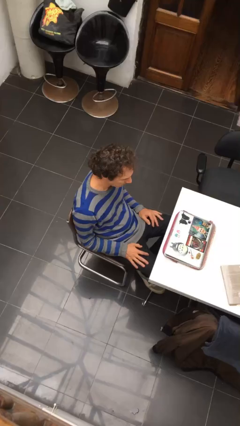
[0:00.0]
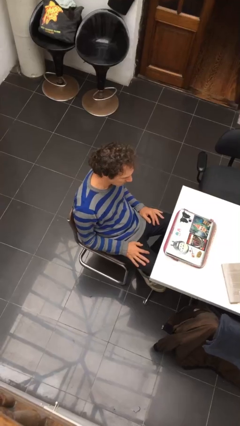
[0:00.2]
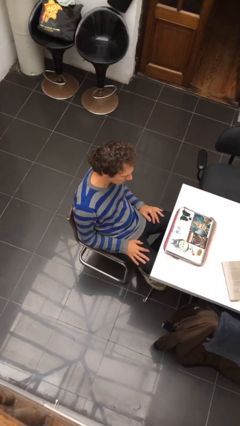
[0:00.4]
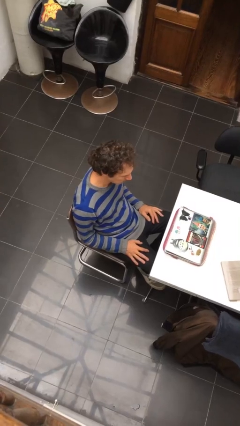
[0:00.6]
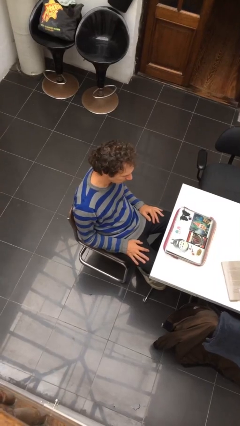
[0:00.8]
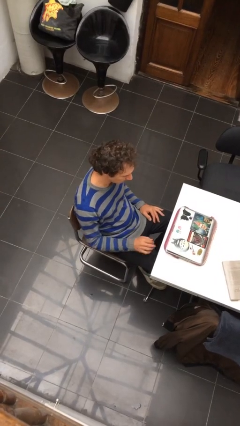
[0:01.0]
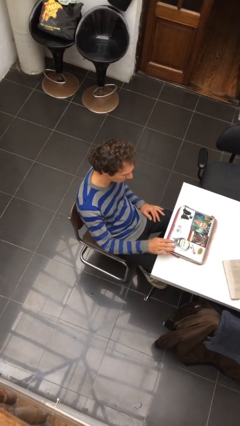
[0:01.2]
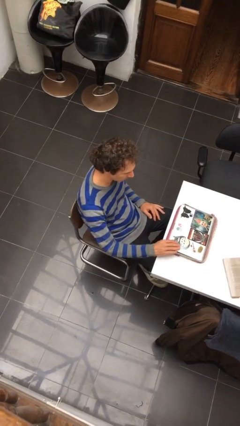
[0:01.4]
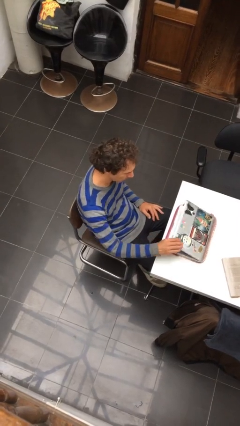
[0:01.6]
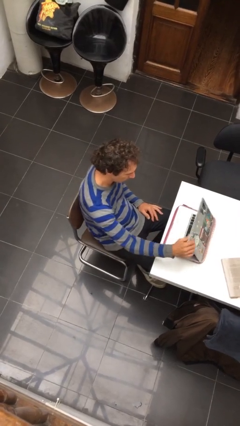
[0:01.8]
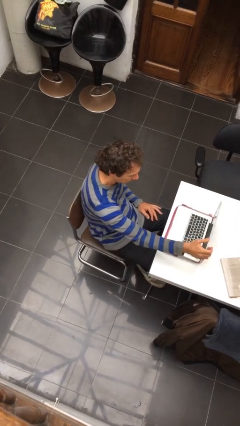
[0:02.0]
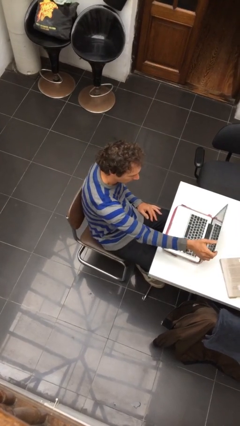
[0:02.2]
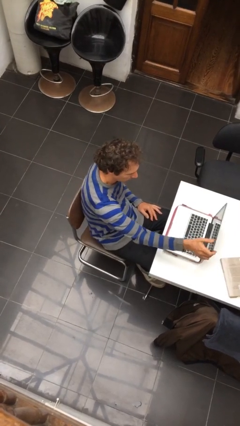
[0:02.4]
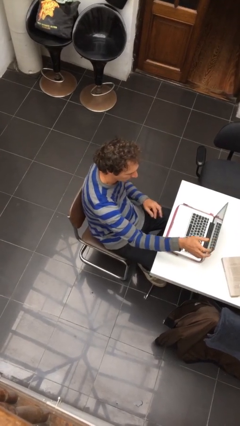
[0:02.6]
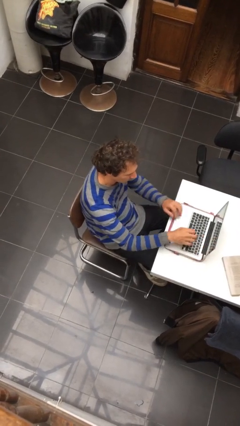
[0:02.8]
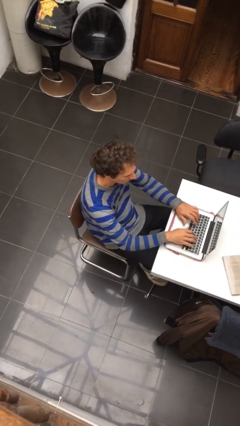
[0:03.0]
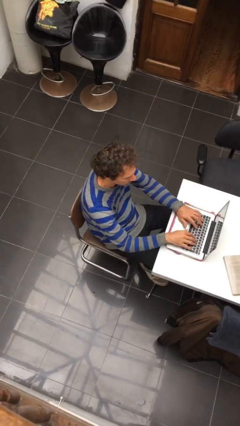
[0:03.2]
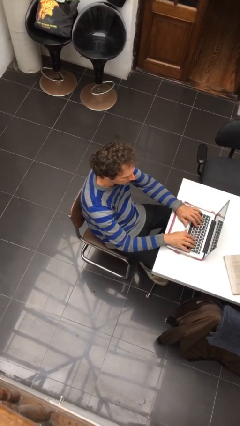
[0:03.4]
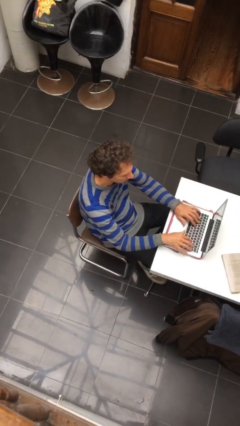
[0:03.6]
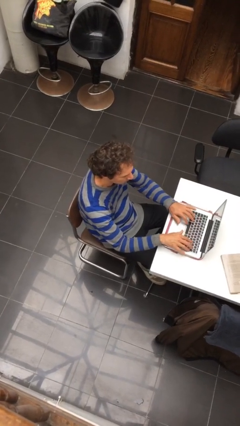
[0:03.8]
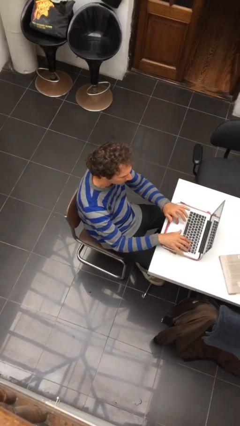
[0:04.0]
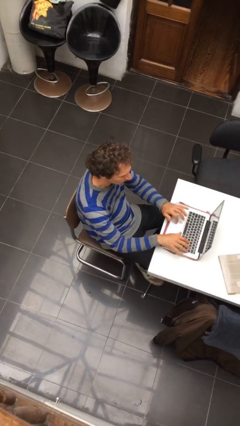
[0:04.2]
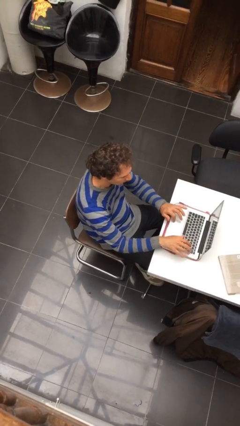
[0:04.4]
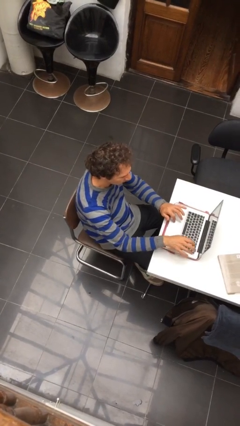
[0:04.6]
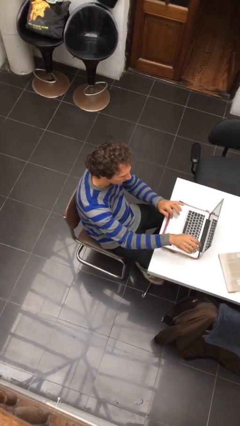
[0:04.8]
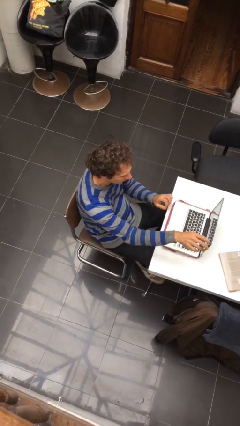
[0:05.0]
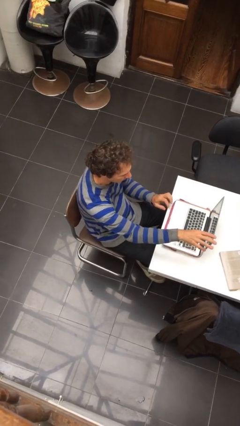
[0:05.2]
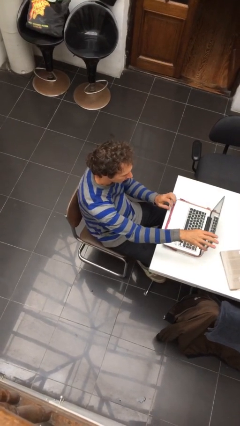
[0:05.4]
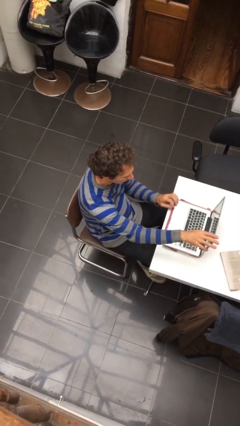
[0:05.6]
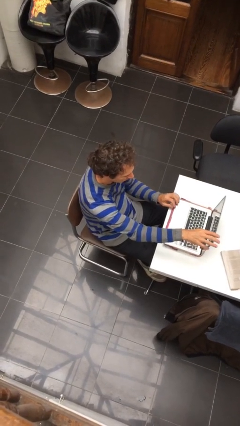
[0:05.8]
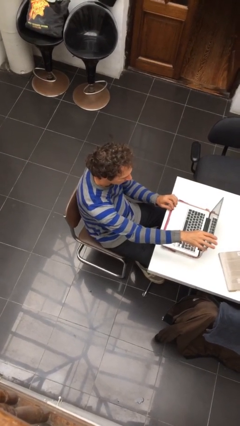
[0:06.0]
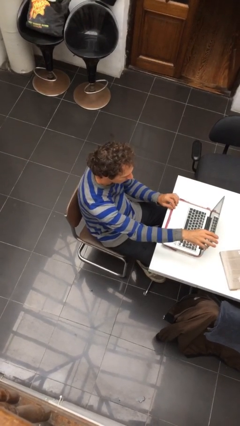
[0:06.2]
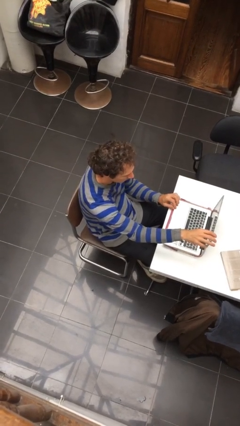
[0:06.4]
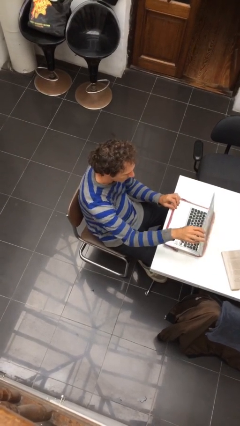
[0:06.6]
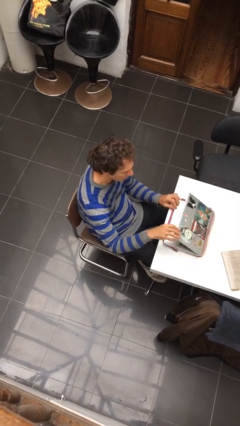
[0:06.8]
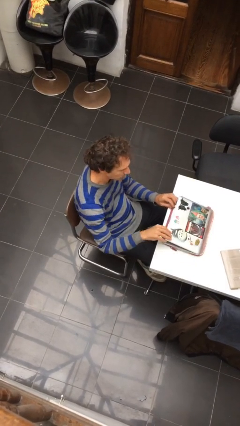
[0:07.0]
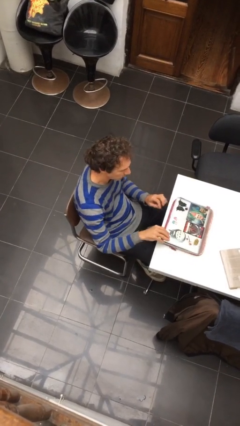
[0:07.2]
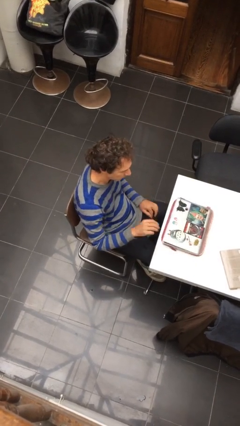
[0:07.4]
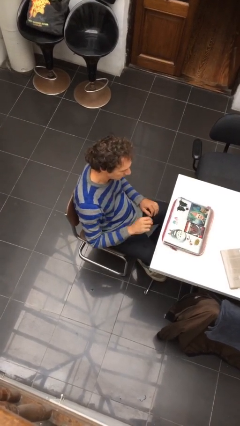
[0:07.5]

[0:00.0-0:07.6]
person interacts with laptop

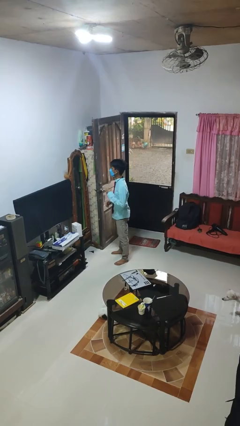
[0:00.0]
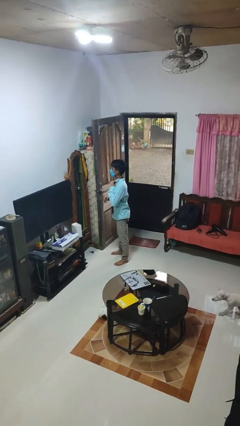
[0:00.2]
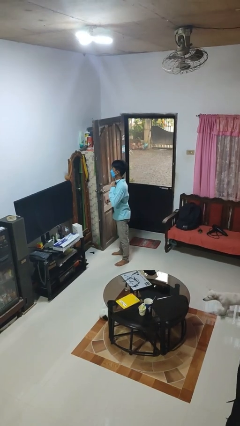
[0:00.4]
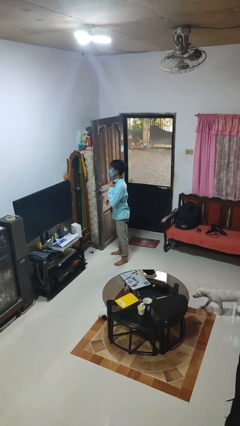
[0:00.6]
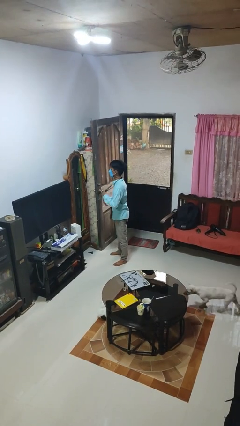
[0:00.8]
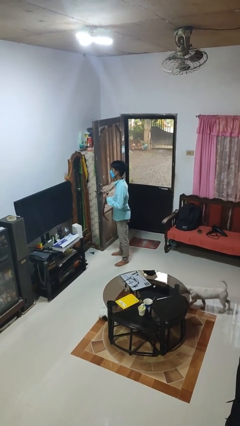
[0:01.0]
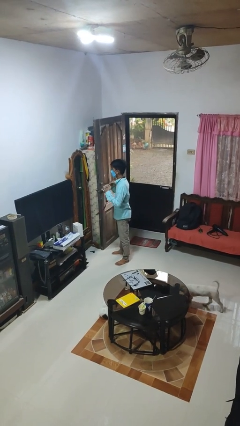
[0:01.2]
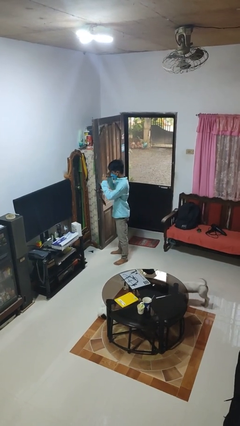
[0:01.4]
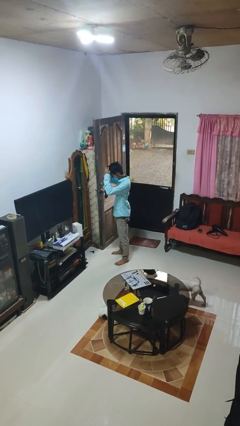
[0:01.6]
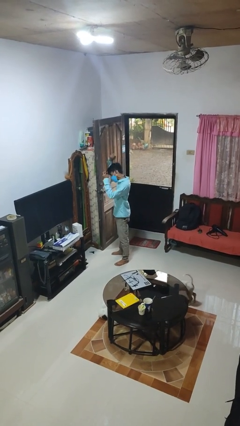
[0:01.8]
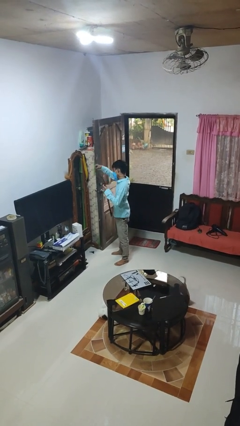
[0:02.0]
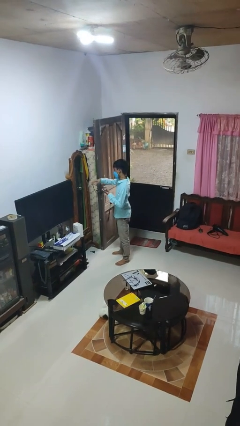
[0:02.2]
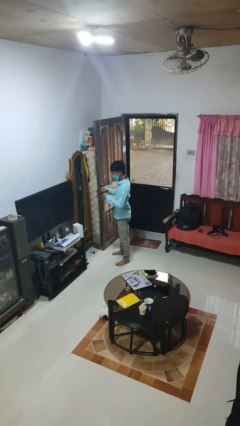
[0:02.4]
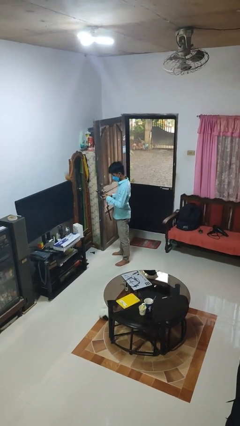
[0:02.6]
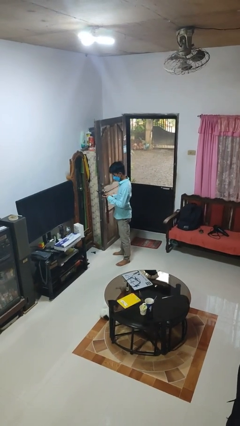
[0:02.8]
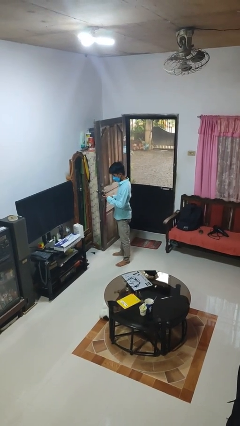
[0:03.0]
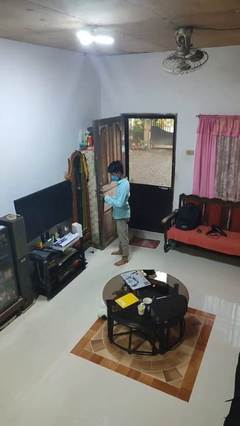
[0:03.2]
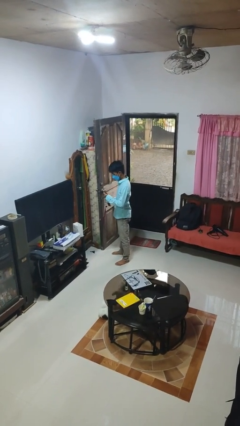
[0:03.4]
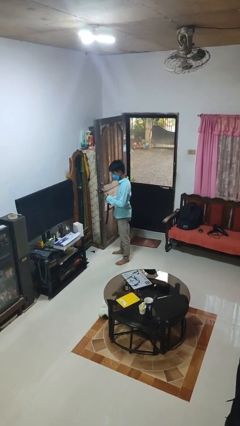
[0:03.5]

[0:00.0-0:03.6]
person takes off necktie

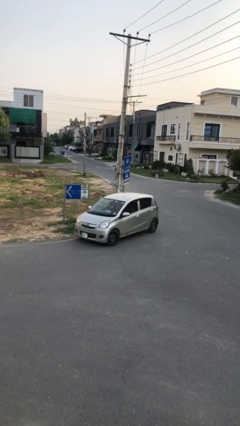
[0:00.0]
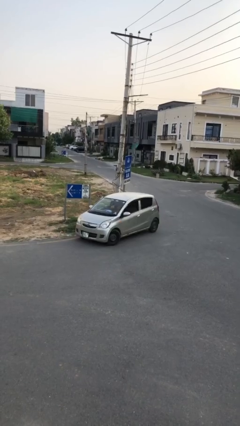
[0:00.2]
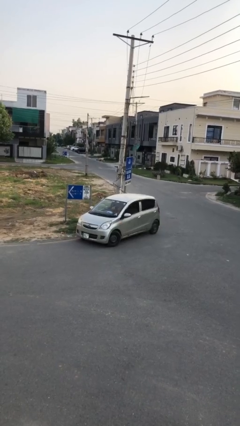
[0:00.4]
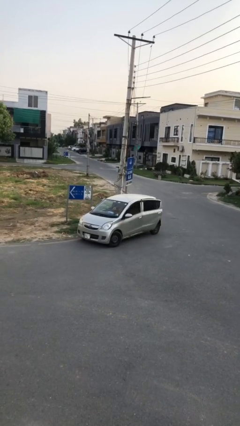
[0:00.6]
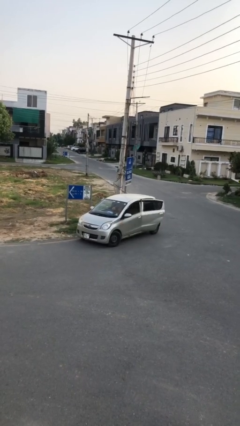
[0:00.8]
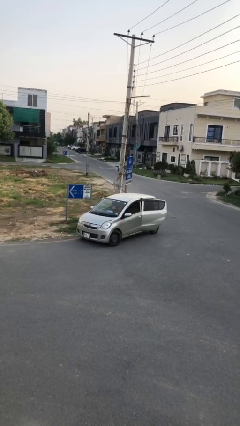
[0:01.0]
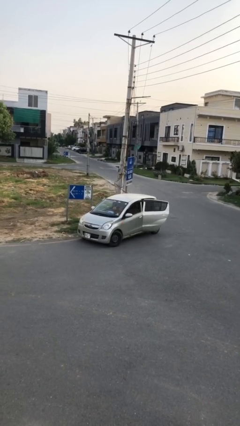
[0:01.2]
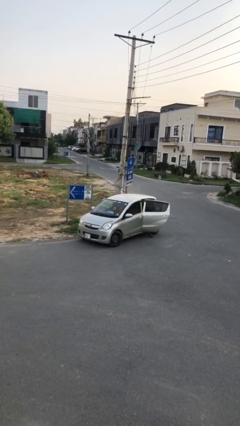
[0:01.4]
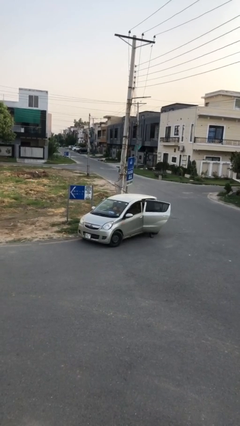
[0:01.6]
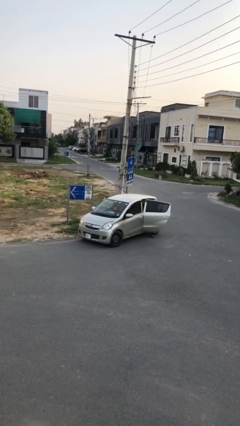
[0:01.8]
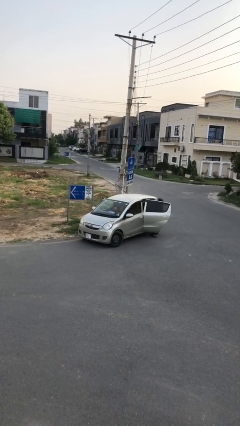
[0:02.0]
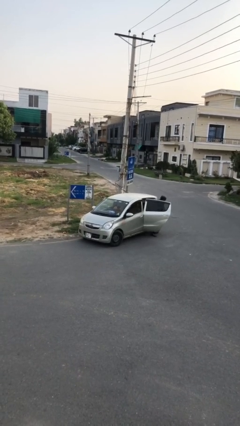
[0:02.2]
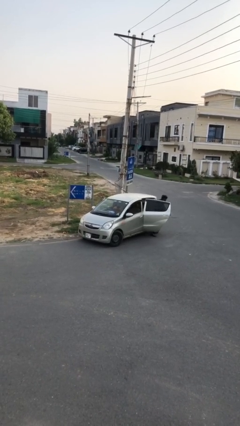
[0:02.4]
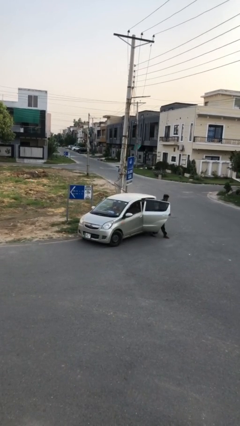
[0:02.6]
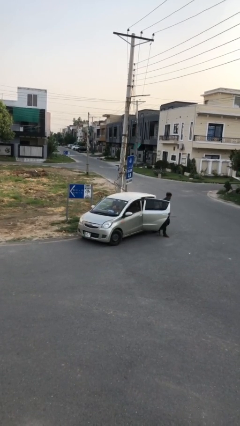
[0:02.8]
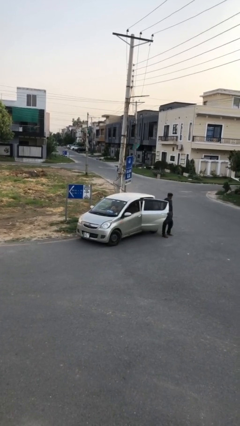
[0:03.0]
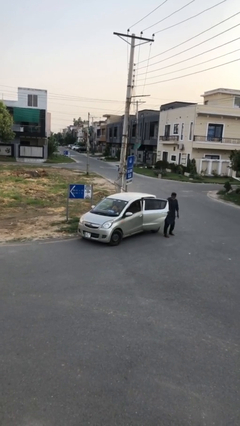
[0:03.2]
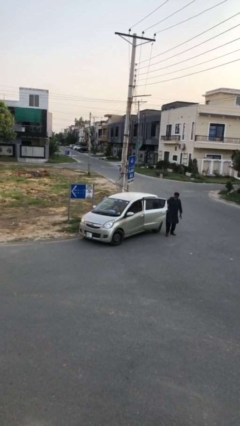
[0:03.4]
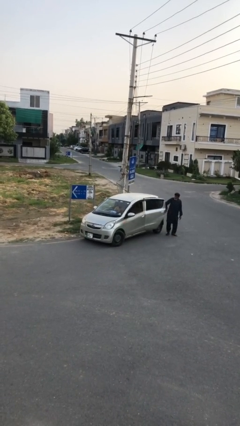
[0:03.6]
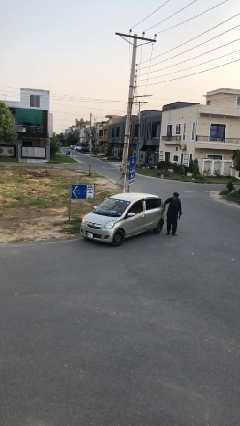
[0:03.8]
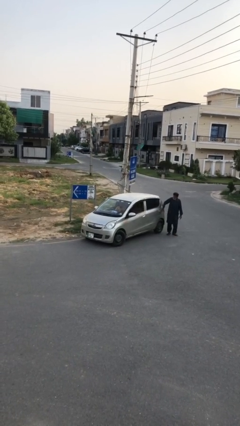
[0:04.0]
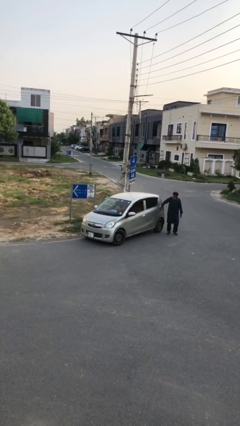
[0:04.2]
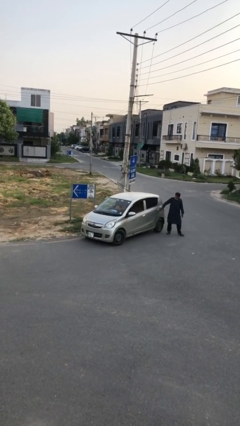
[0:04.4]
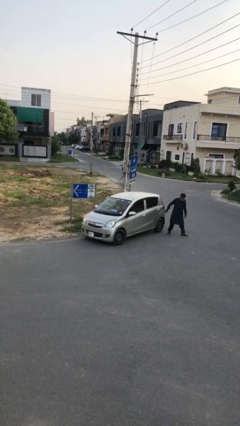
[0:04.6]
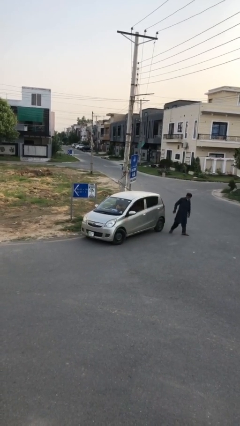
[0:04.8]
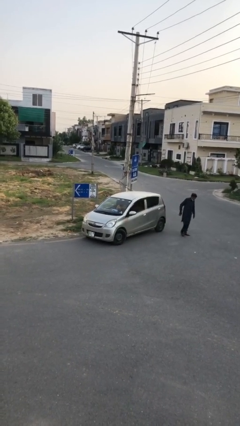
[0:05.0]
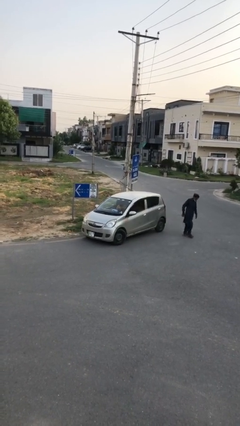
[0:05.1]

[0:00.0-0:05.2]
car drops off person

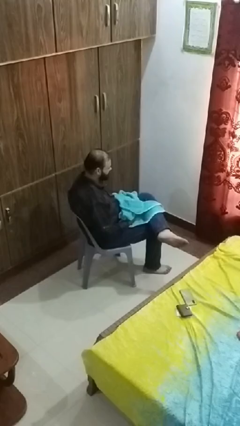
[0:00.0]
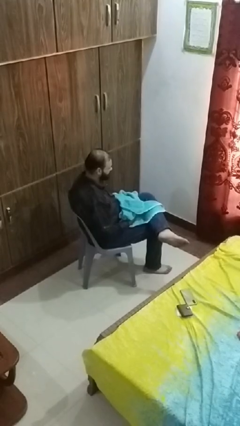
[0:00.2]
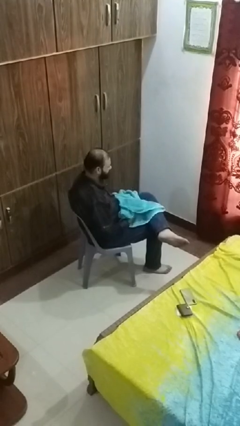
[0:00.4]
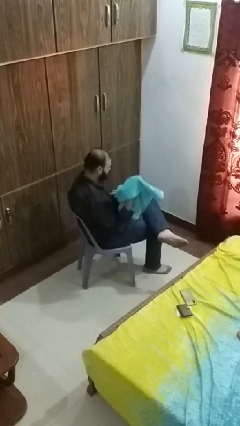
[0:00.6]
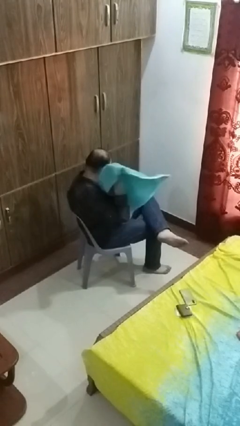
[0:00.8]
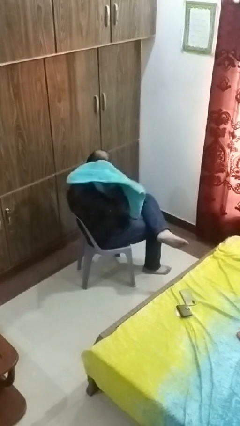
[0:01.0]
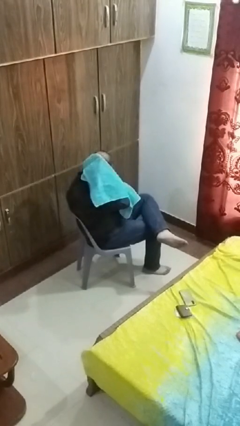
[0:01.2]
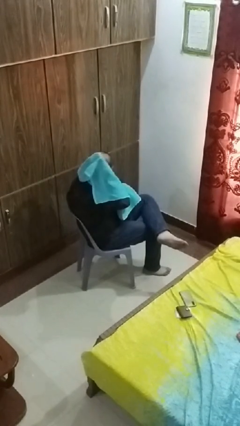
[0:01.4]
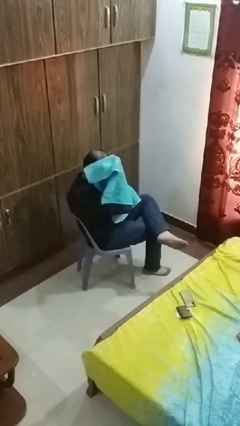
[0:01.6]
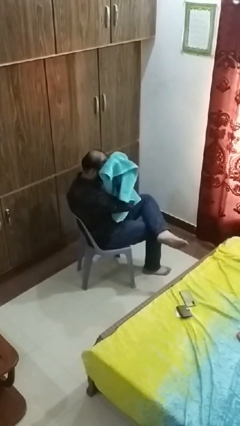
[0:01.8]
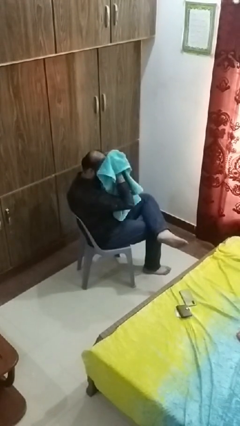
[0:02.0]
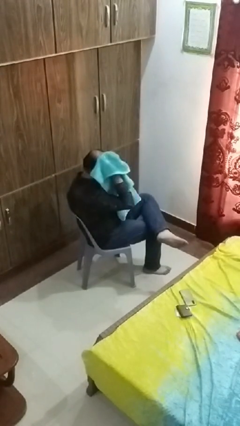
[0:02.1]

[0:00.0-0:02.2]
person dries hair with towel
